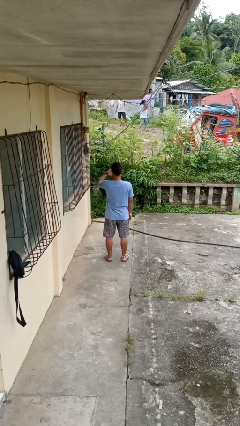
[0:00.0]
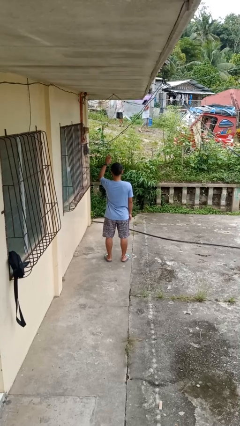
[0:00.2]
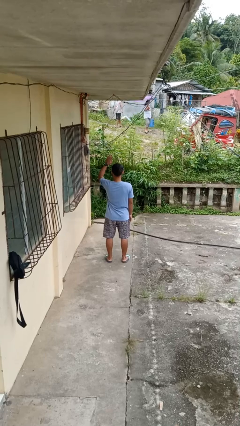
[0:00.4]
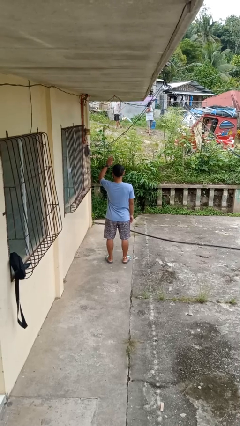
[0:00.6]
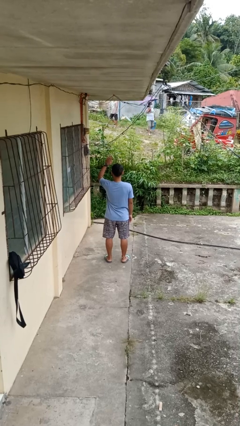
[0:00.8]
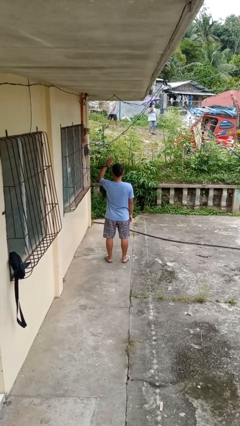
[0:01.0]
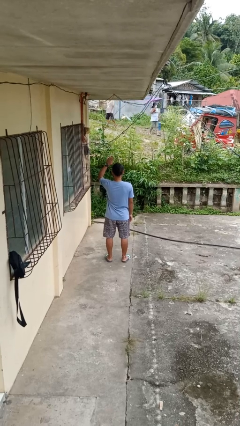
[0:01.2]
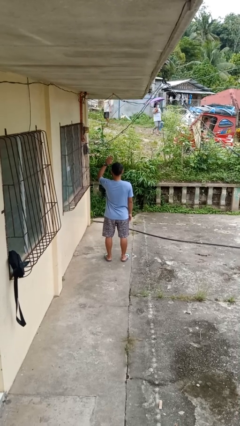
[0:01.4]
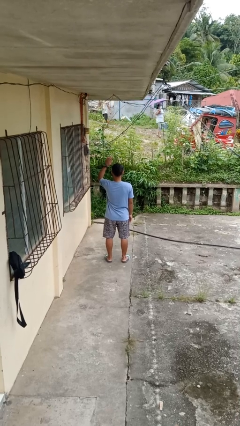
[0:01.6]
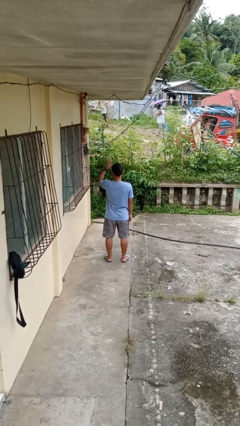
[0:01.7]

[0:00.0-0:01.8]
person gestures swipe up

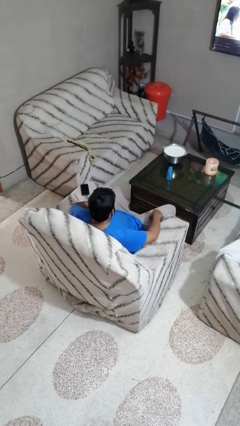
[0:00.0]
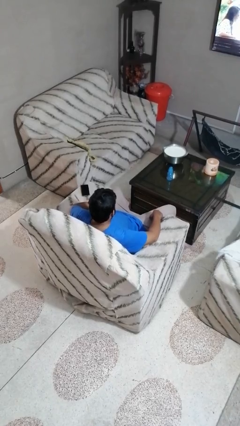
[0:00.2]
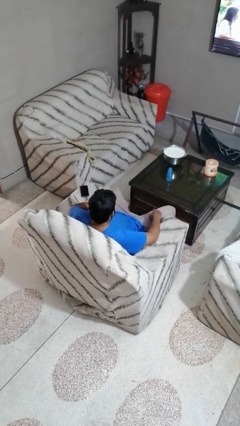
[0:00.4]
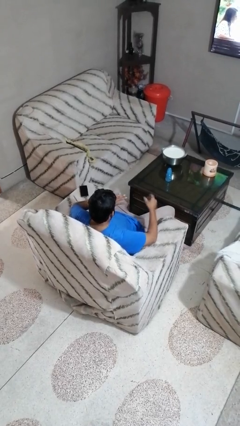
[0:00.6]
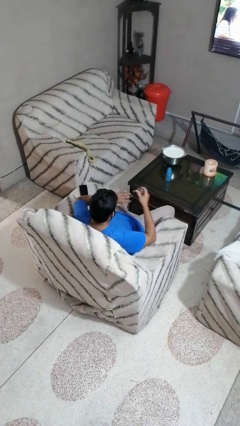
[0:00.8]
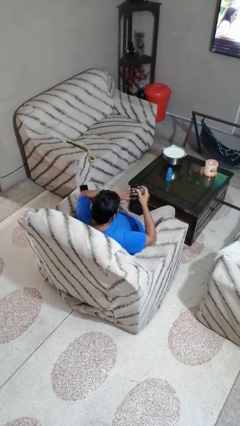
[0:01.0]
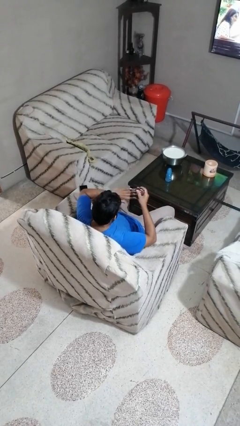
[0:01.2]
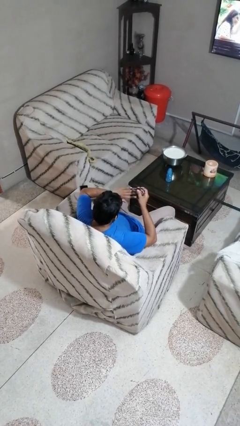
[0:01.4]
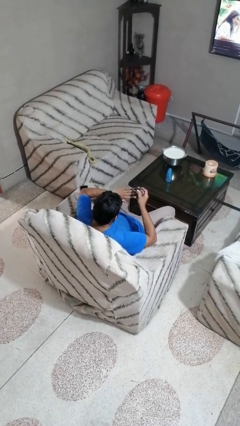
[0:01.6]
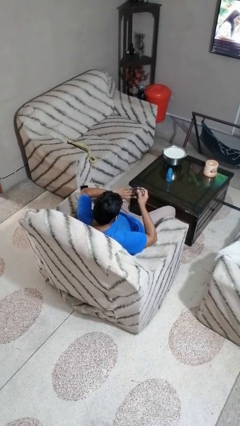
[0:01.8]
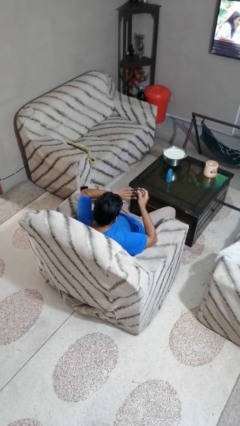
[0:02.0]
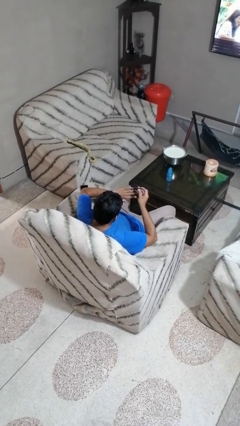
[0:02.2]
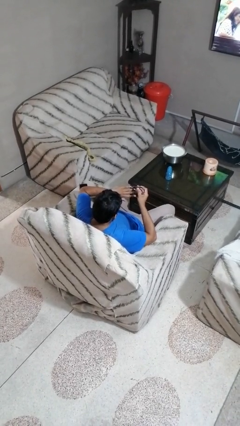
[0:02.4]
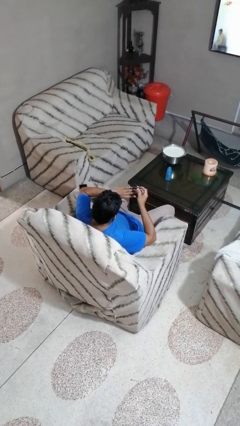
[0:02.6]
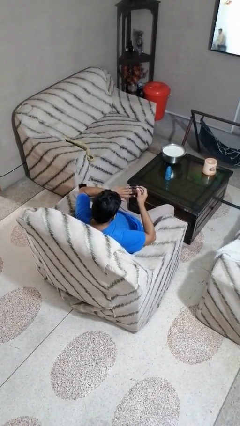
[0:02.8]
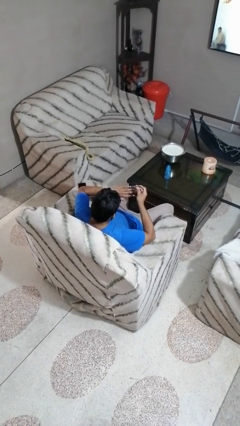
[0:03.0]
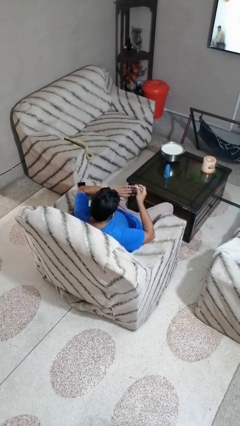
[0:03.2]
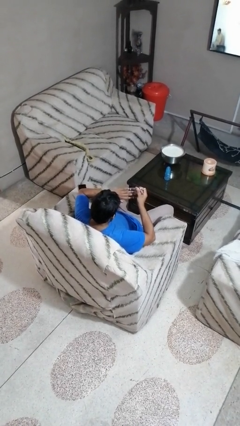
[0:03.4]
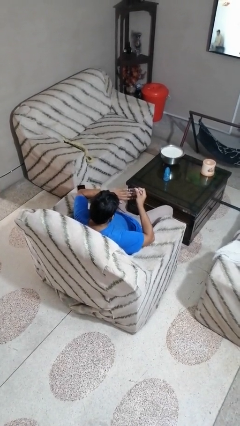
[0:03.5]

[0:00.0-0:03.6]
person clips fingernails

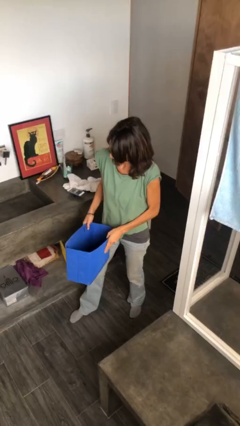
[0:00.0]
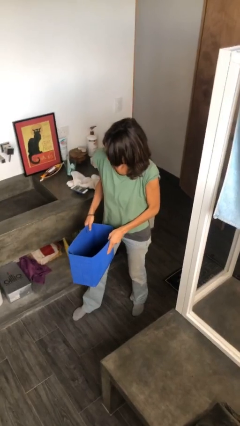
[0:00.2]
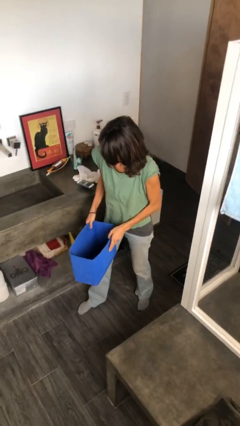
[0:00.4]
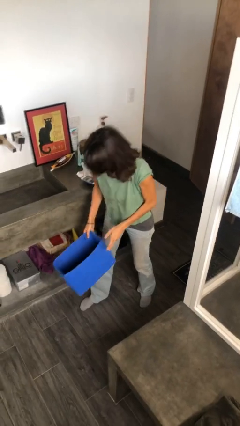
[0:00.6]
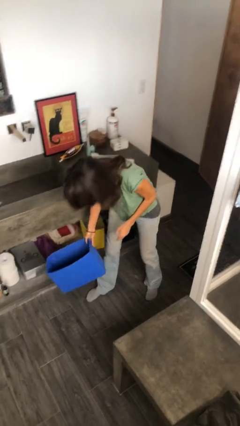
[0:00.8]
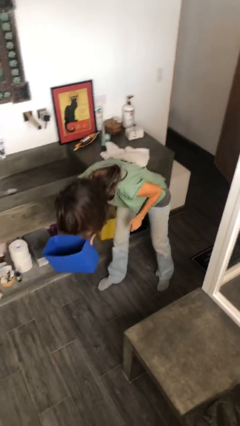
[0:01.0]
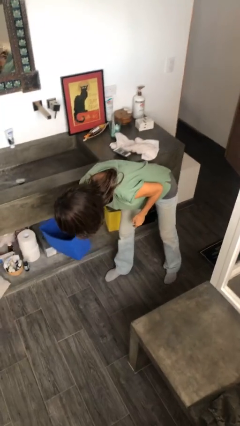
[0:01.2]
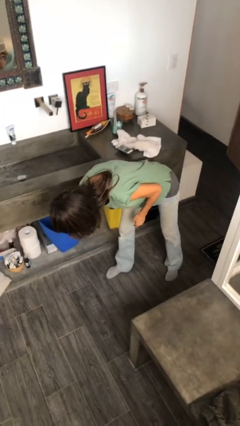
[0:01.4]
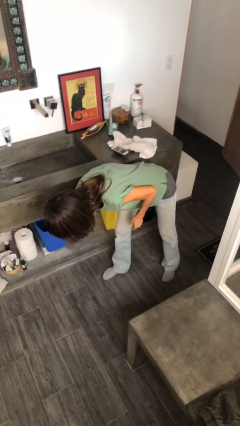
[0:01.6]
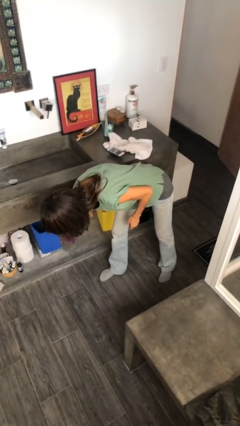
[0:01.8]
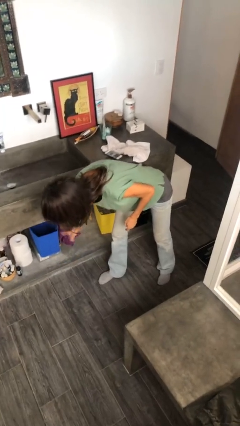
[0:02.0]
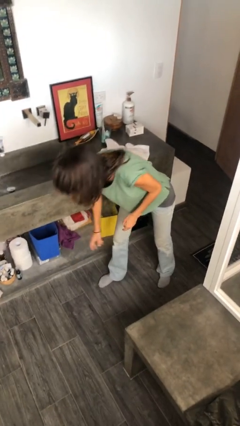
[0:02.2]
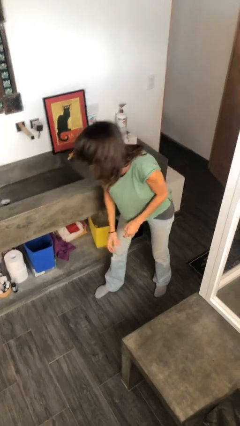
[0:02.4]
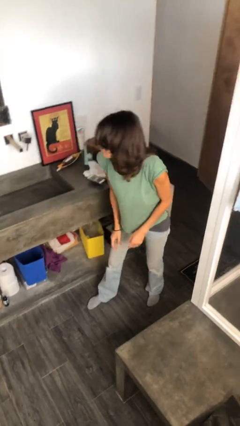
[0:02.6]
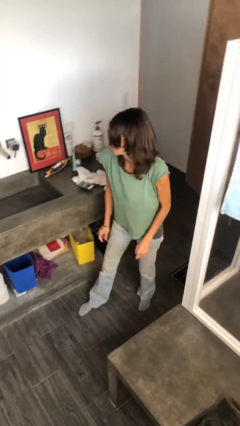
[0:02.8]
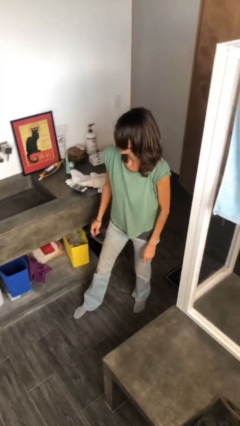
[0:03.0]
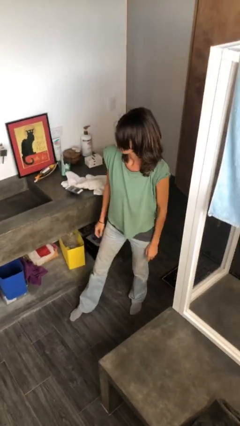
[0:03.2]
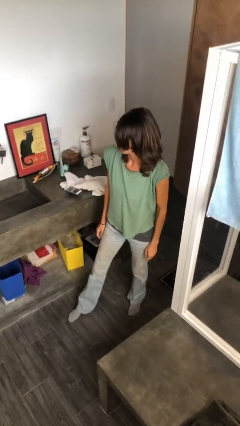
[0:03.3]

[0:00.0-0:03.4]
person puts down object into cabinet

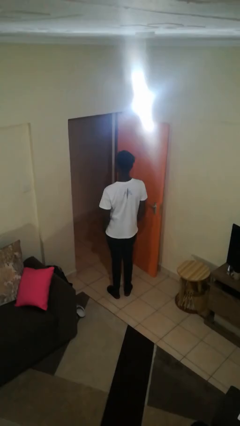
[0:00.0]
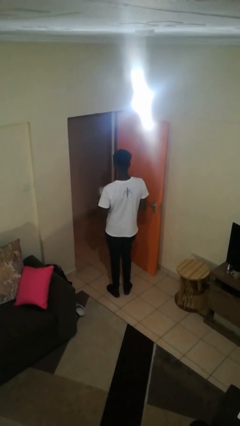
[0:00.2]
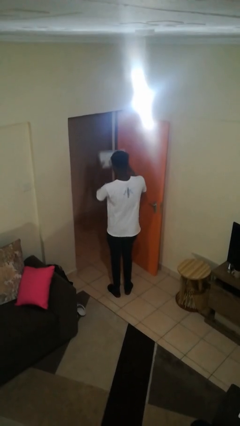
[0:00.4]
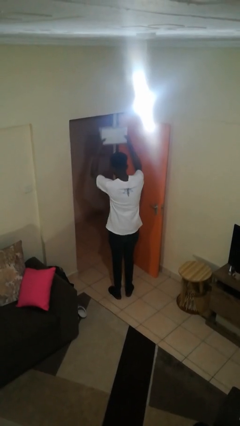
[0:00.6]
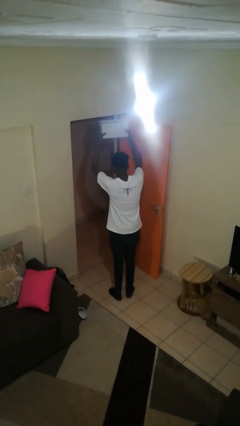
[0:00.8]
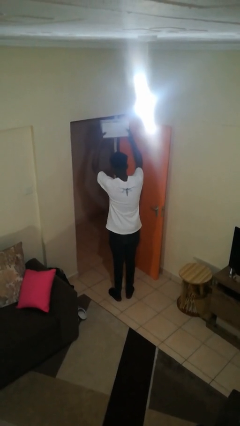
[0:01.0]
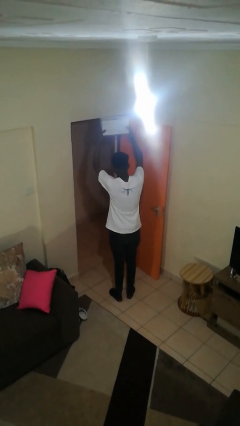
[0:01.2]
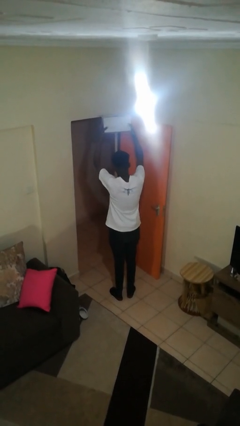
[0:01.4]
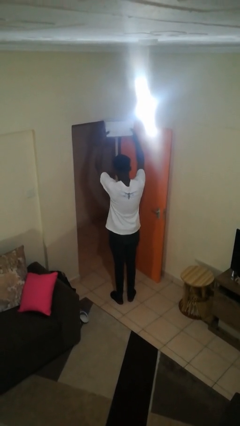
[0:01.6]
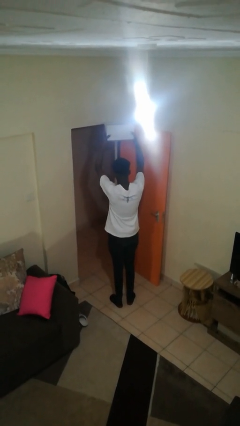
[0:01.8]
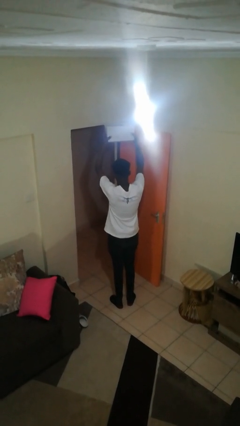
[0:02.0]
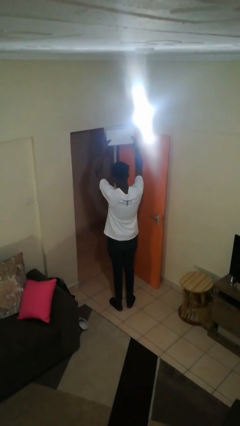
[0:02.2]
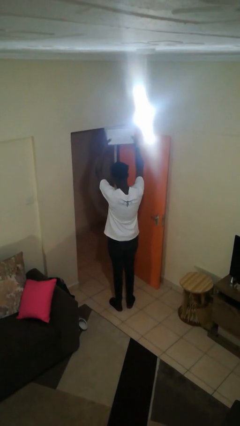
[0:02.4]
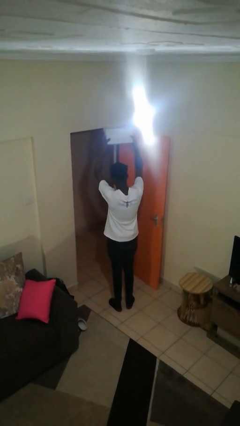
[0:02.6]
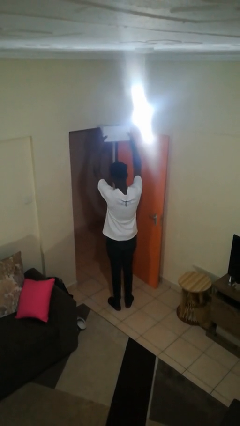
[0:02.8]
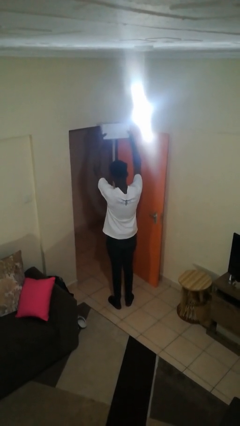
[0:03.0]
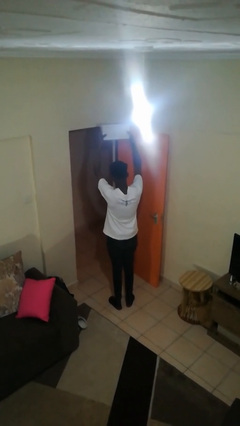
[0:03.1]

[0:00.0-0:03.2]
person holds object above head

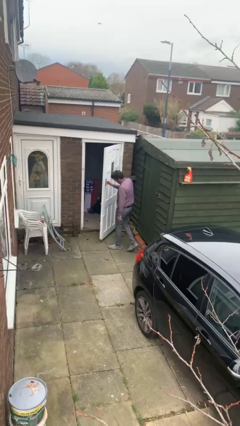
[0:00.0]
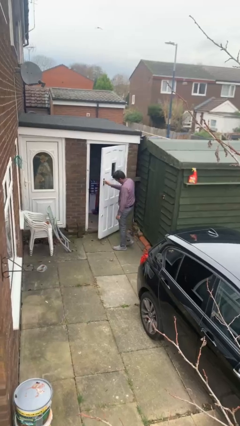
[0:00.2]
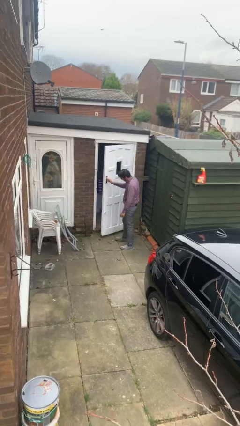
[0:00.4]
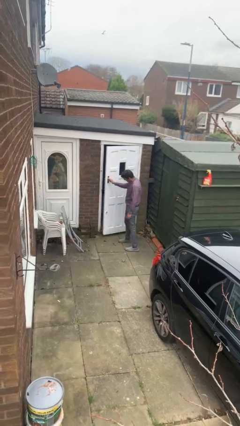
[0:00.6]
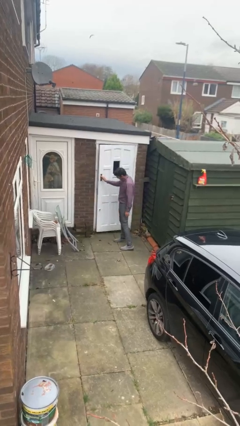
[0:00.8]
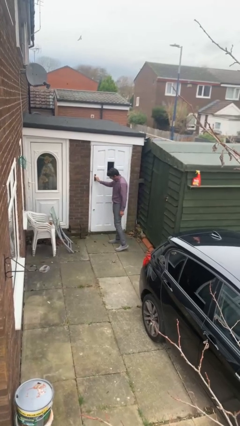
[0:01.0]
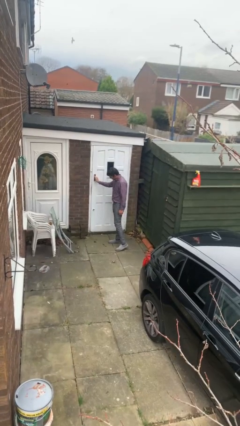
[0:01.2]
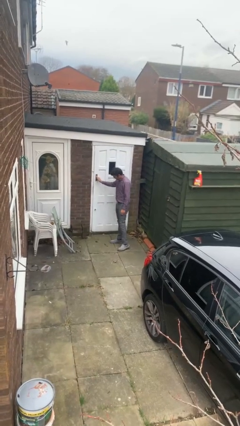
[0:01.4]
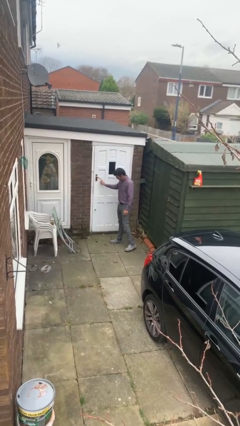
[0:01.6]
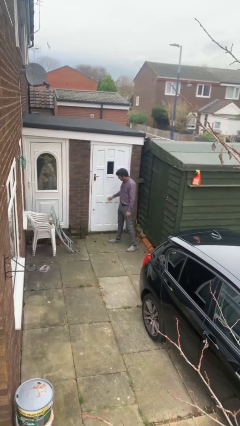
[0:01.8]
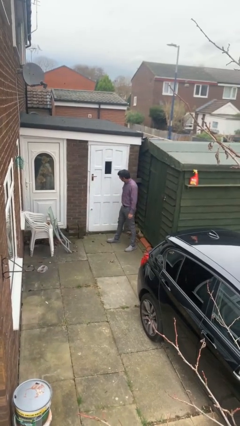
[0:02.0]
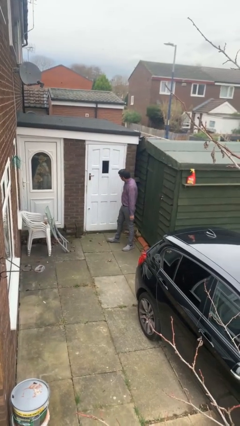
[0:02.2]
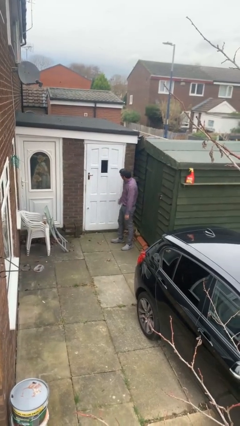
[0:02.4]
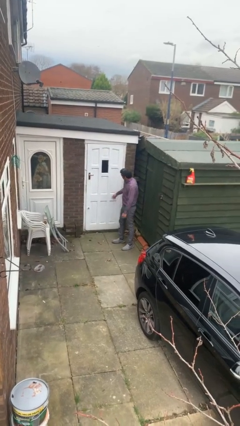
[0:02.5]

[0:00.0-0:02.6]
person closes facility door

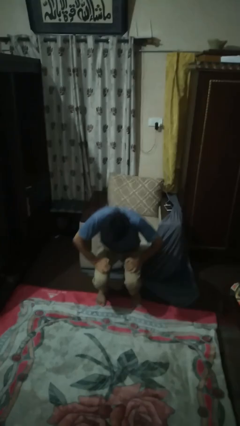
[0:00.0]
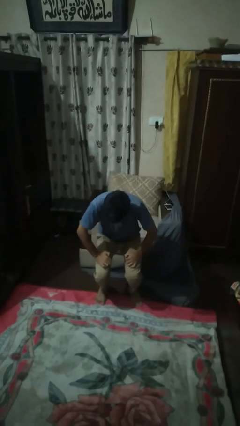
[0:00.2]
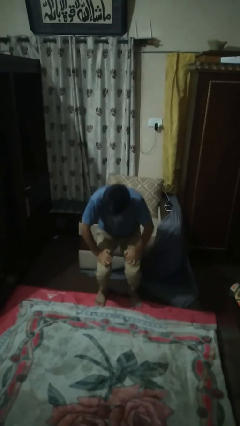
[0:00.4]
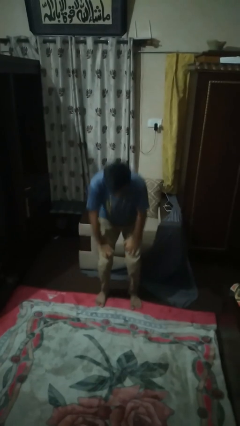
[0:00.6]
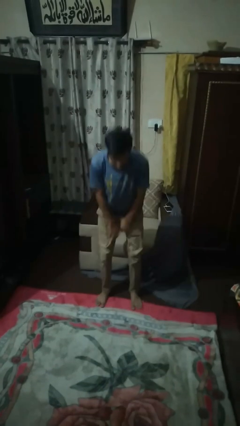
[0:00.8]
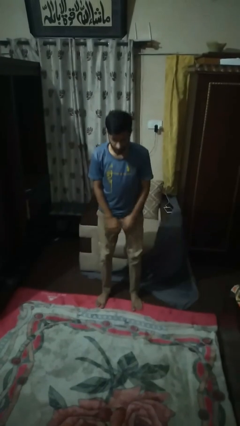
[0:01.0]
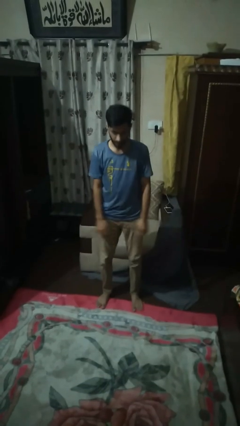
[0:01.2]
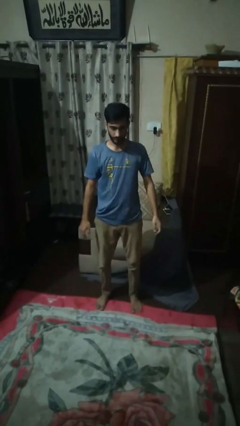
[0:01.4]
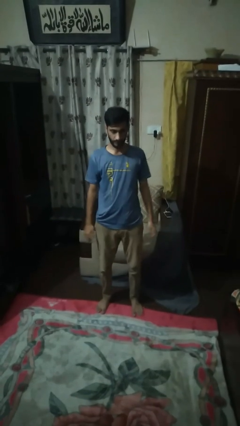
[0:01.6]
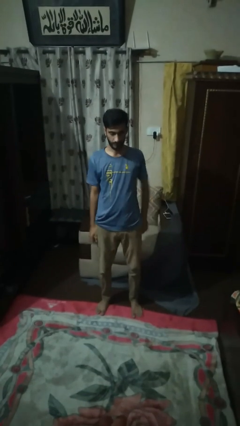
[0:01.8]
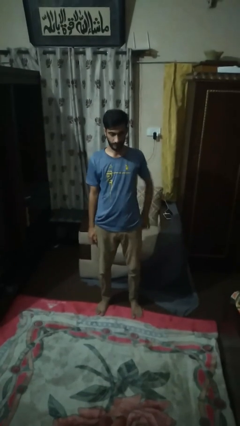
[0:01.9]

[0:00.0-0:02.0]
person stands up

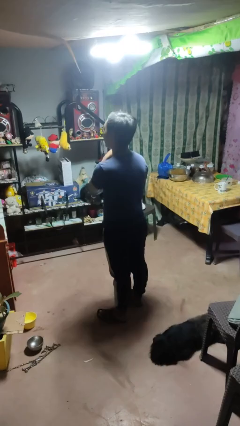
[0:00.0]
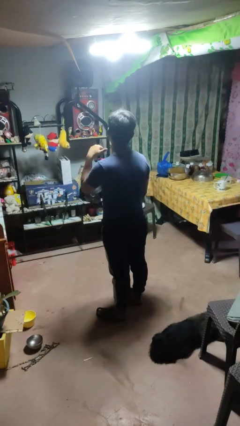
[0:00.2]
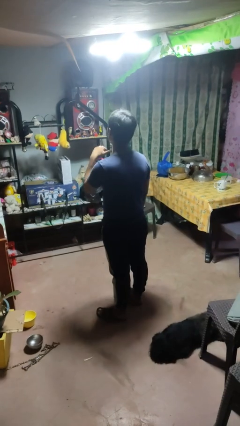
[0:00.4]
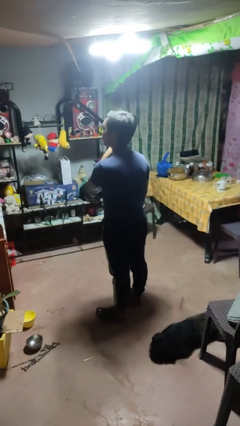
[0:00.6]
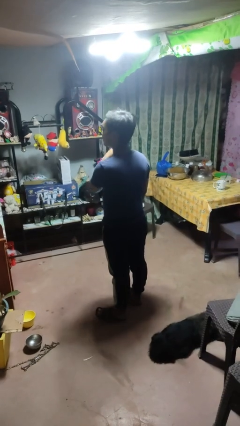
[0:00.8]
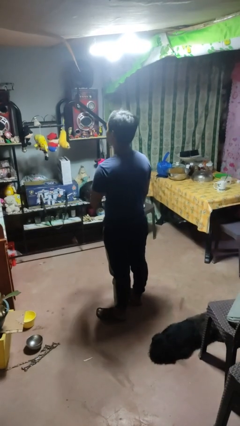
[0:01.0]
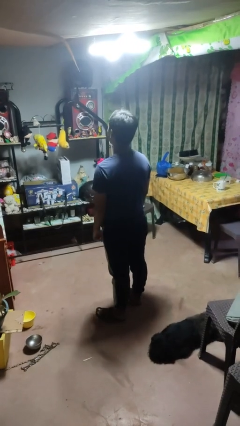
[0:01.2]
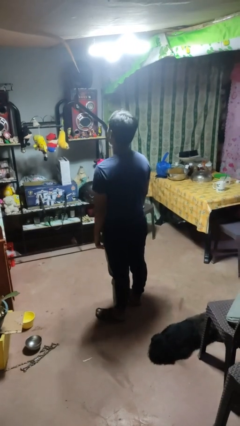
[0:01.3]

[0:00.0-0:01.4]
person gestures cut
